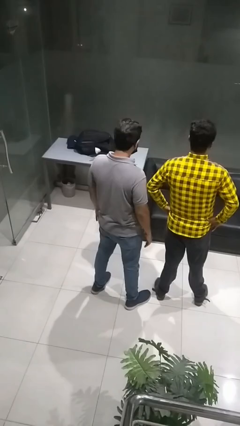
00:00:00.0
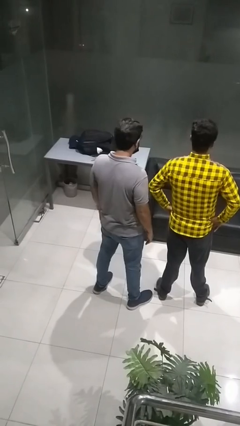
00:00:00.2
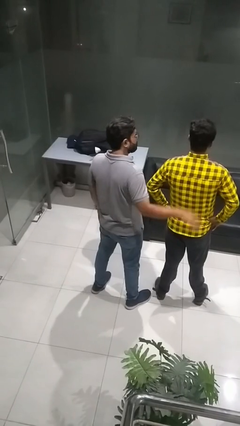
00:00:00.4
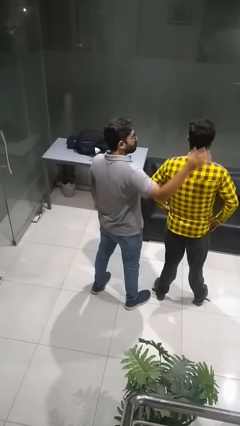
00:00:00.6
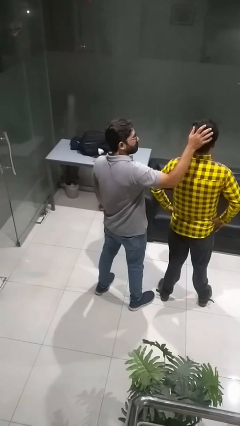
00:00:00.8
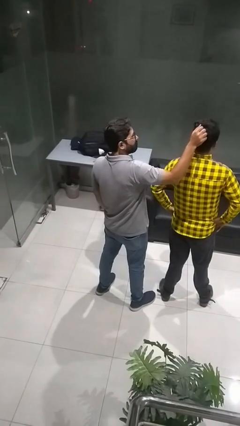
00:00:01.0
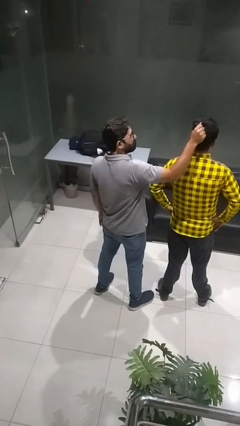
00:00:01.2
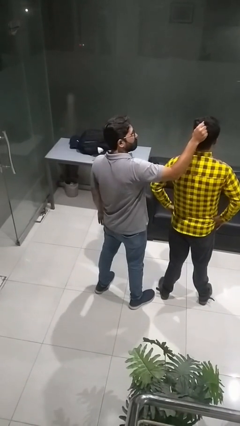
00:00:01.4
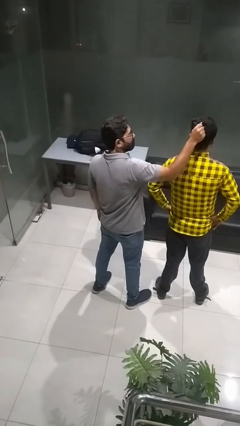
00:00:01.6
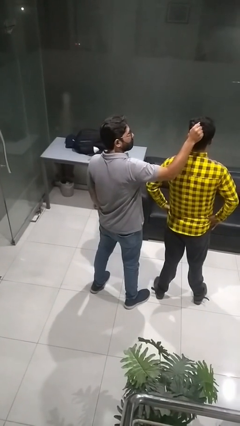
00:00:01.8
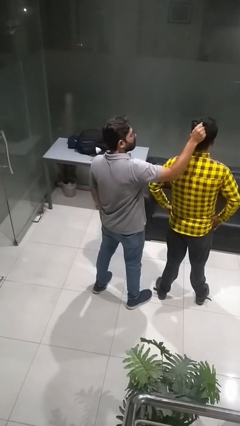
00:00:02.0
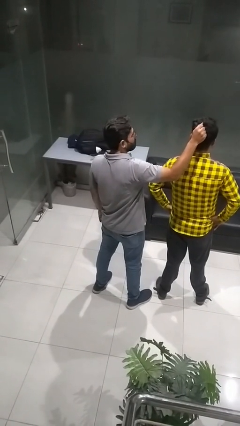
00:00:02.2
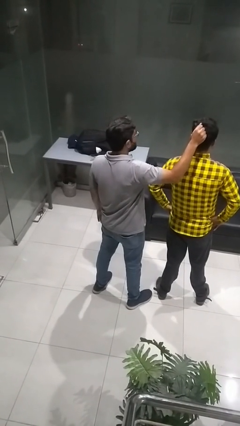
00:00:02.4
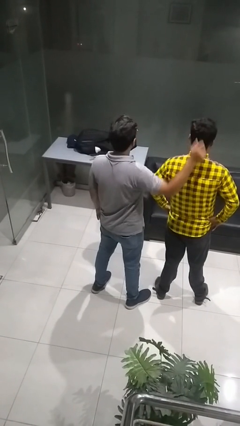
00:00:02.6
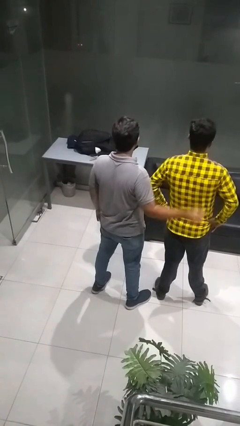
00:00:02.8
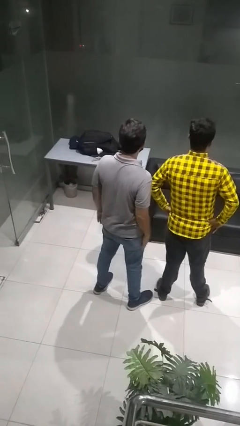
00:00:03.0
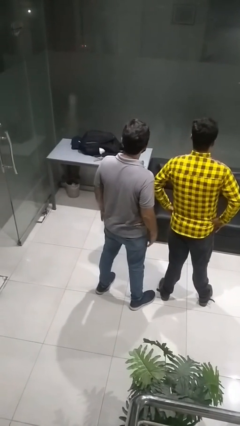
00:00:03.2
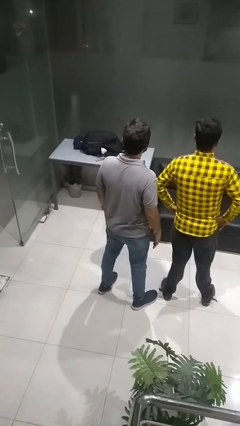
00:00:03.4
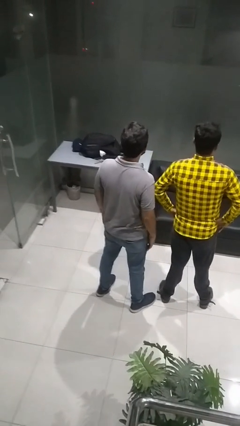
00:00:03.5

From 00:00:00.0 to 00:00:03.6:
person grabs person by hair

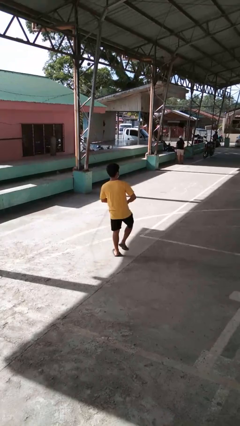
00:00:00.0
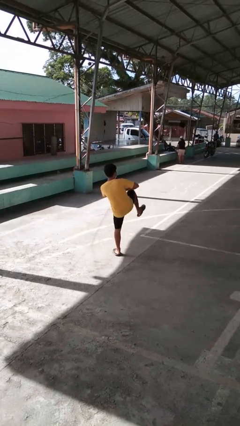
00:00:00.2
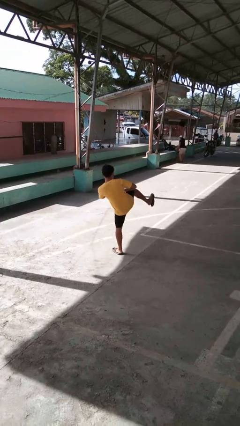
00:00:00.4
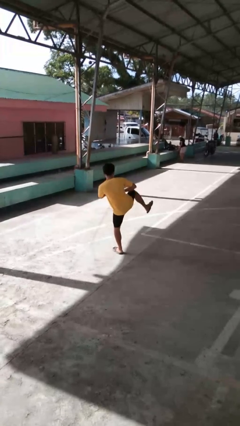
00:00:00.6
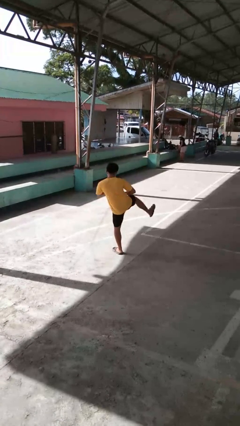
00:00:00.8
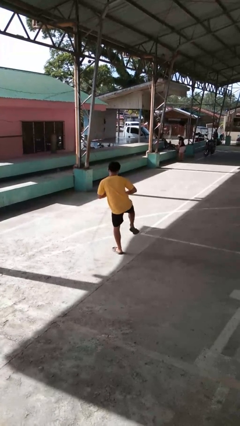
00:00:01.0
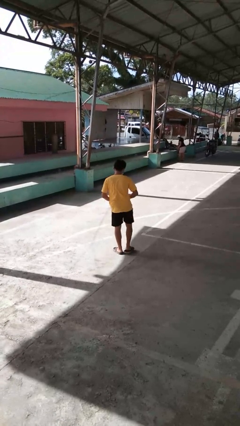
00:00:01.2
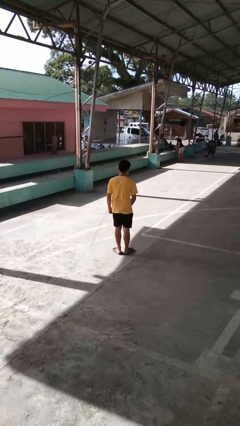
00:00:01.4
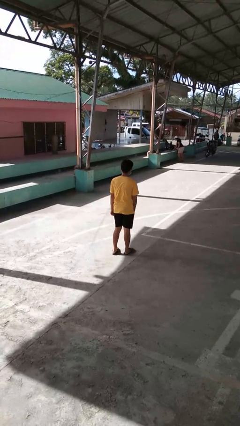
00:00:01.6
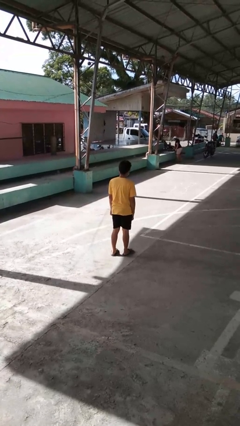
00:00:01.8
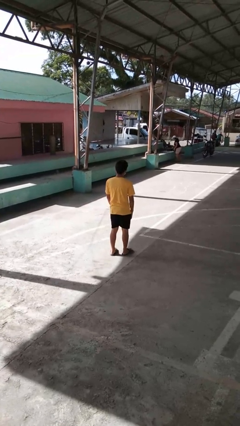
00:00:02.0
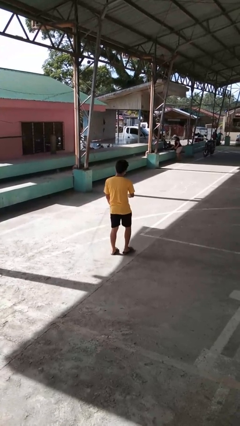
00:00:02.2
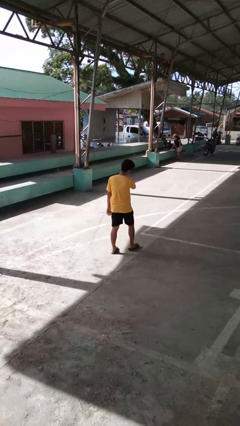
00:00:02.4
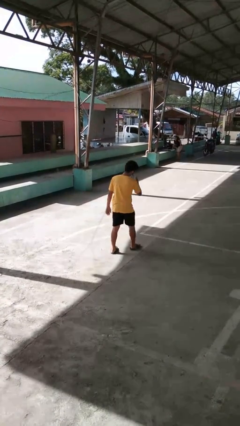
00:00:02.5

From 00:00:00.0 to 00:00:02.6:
person karate kicks

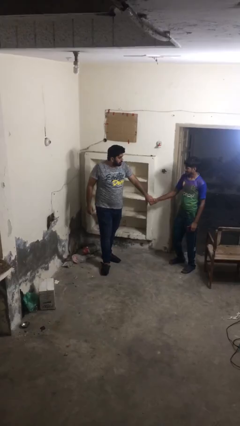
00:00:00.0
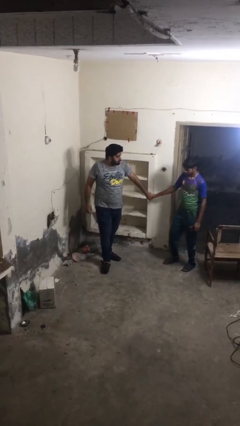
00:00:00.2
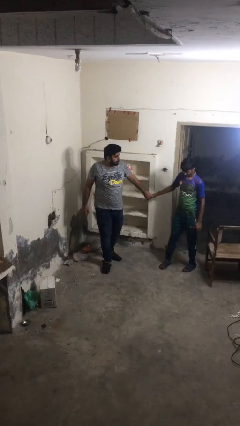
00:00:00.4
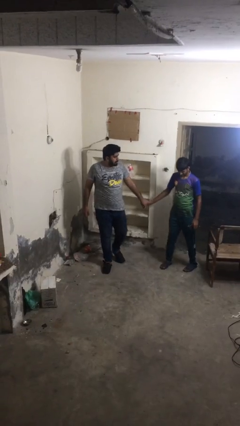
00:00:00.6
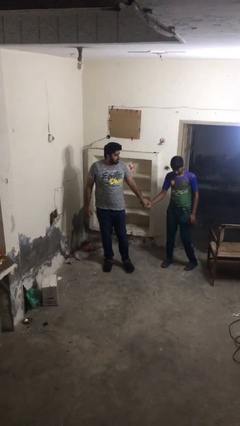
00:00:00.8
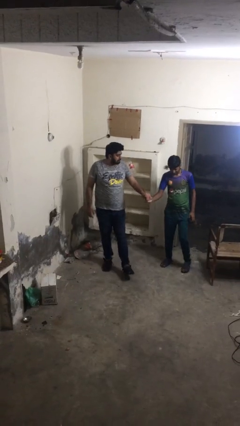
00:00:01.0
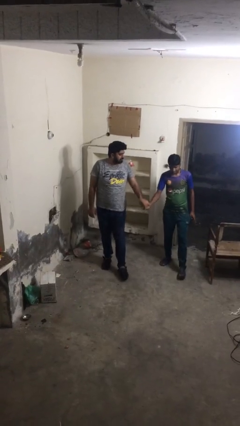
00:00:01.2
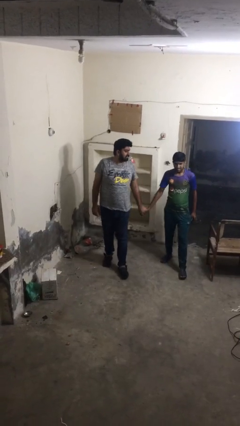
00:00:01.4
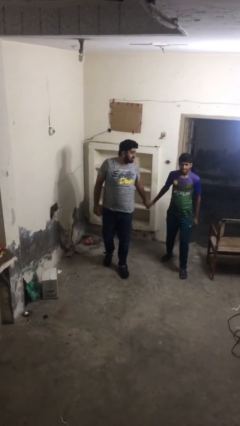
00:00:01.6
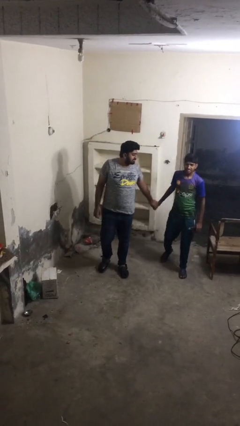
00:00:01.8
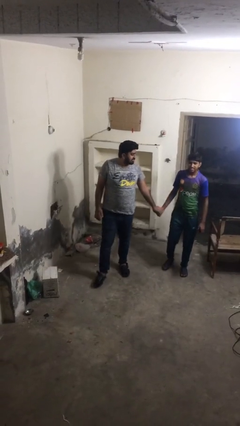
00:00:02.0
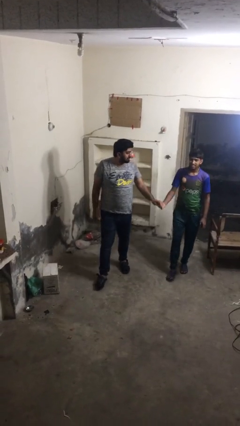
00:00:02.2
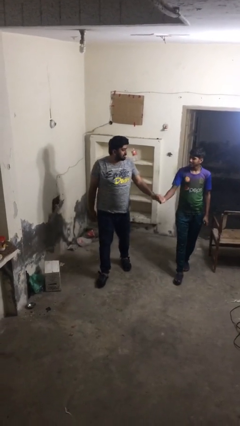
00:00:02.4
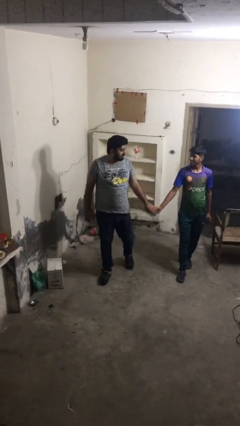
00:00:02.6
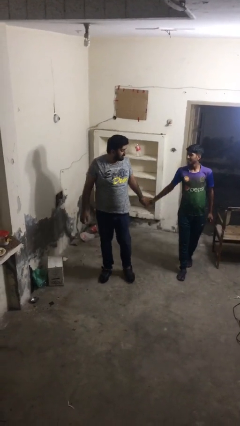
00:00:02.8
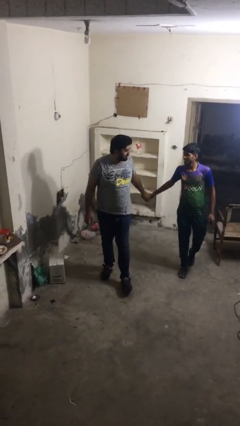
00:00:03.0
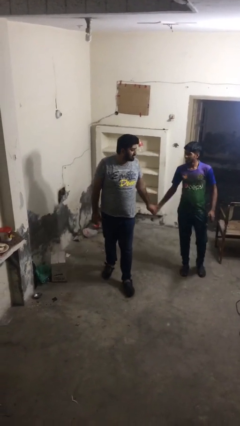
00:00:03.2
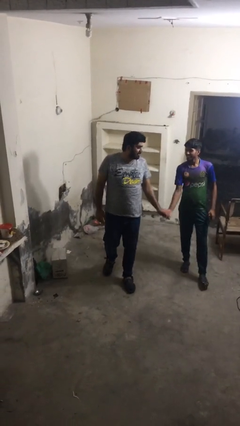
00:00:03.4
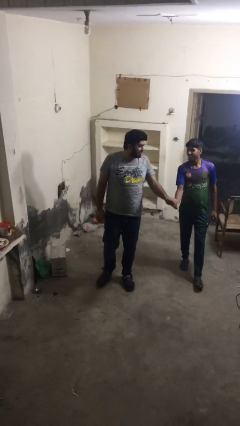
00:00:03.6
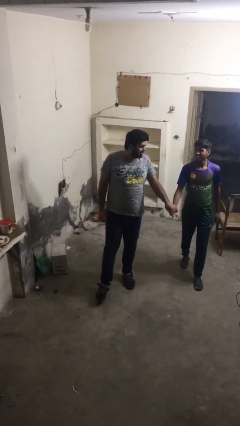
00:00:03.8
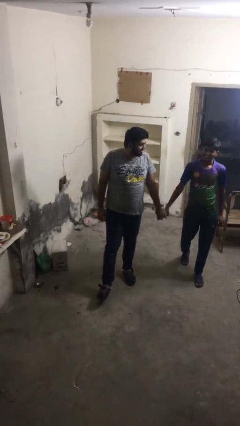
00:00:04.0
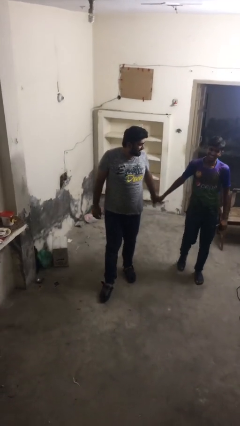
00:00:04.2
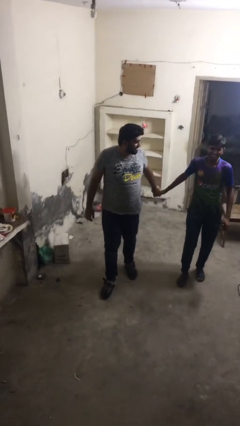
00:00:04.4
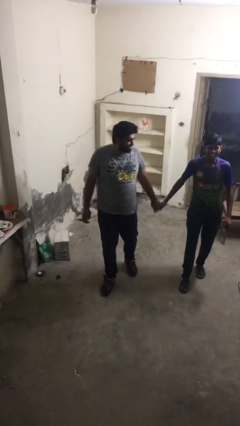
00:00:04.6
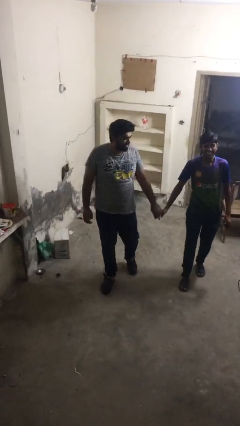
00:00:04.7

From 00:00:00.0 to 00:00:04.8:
person holds hand

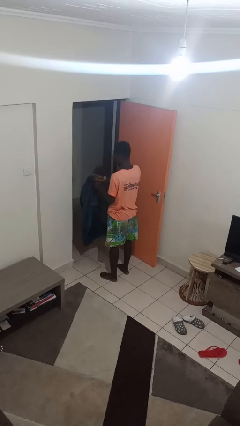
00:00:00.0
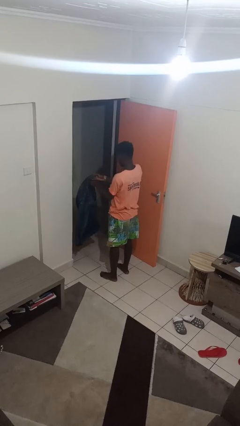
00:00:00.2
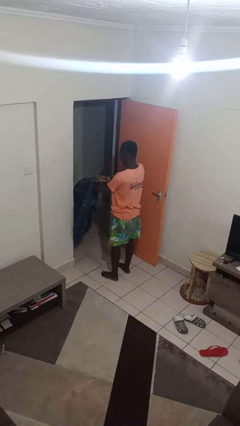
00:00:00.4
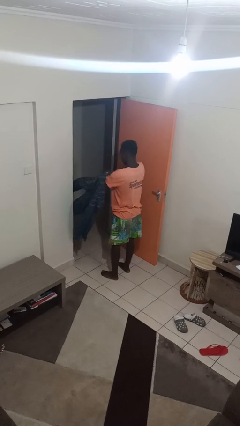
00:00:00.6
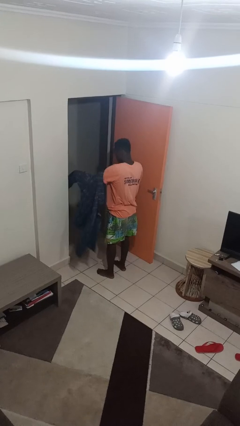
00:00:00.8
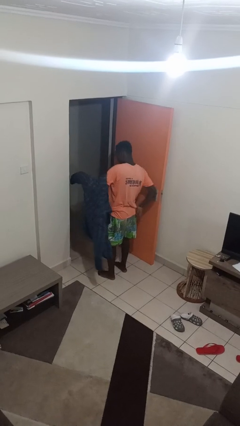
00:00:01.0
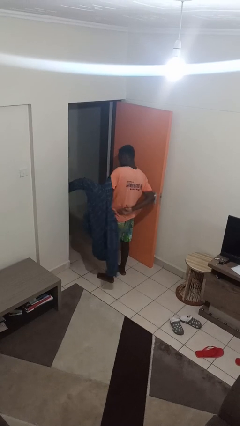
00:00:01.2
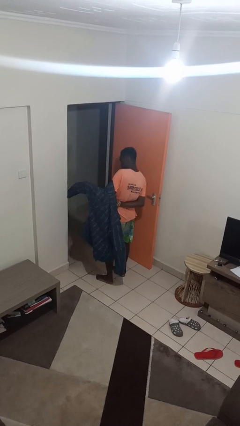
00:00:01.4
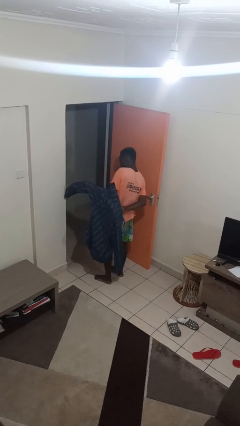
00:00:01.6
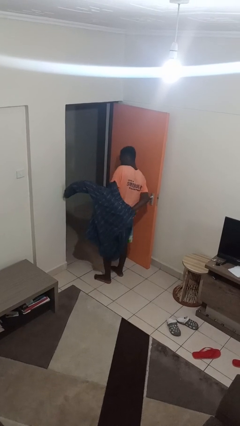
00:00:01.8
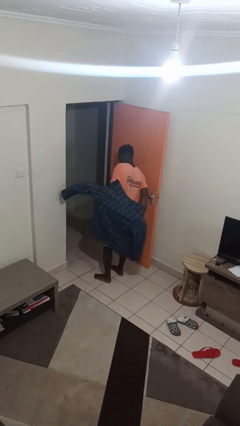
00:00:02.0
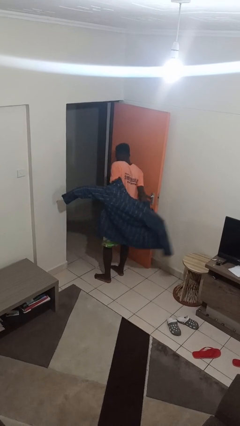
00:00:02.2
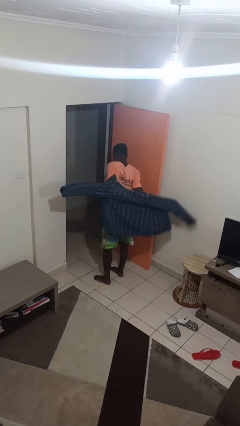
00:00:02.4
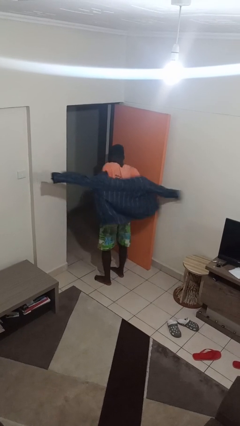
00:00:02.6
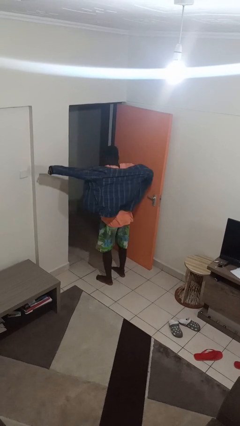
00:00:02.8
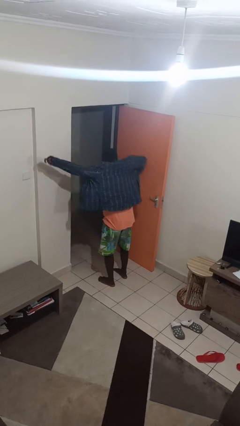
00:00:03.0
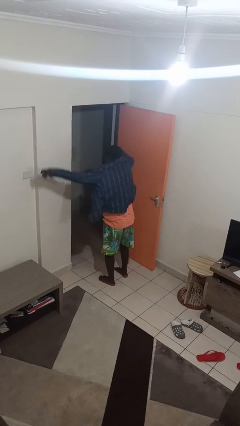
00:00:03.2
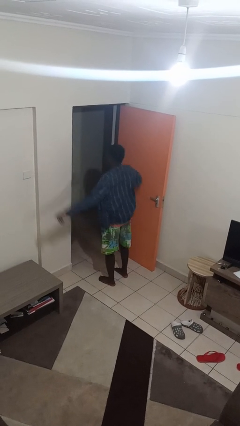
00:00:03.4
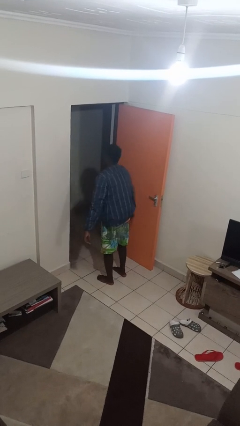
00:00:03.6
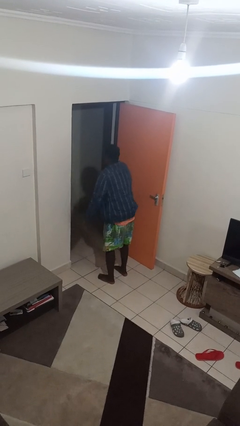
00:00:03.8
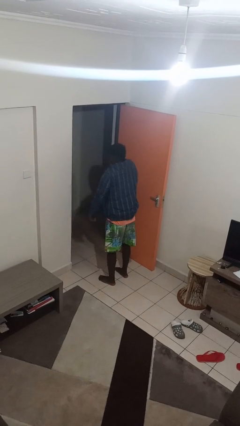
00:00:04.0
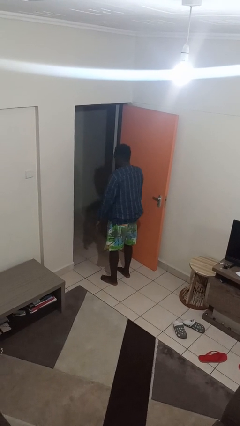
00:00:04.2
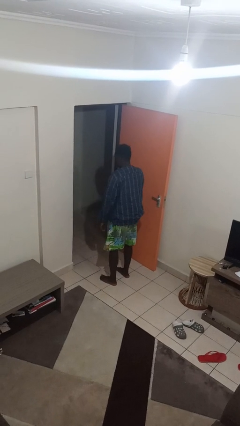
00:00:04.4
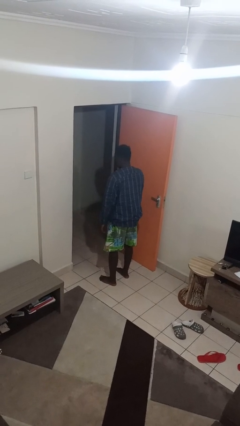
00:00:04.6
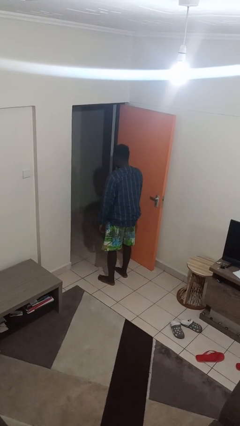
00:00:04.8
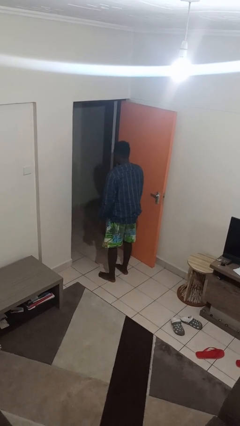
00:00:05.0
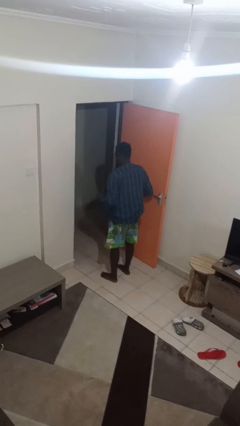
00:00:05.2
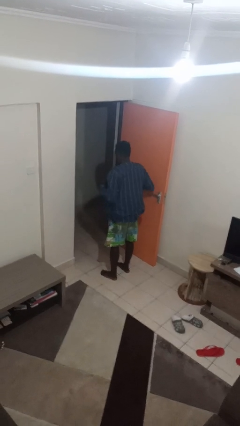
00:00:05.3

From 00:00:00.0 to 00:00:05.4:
person puts on jacket

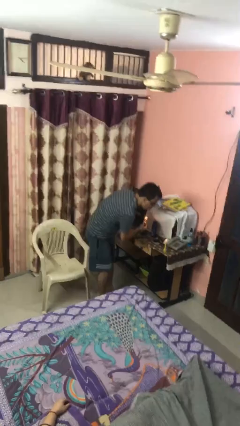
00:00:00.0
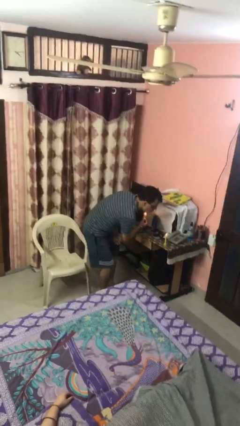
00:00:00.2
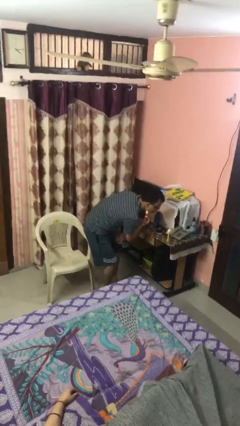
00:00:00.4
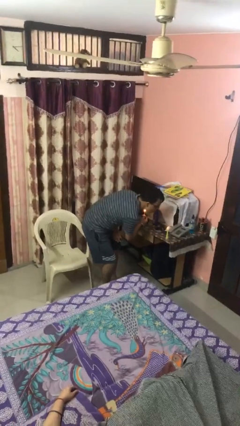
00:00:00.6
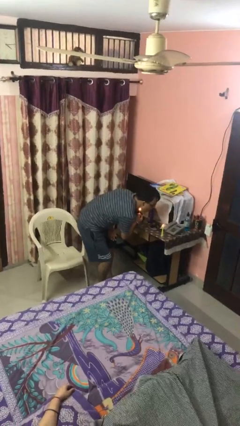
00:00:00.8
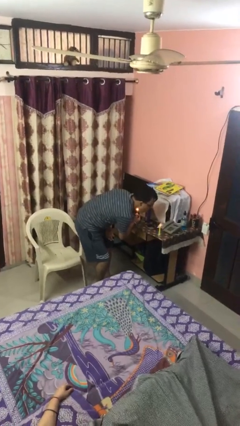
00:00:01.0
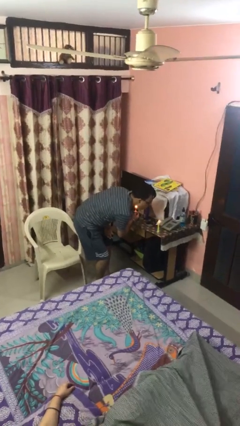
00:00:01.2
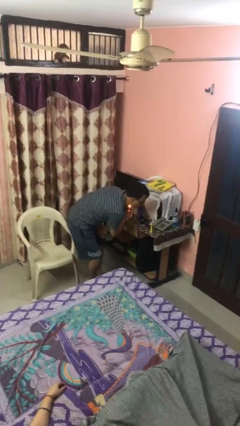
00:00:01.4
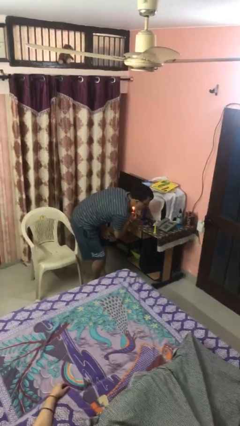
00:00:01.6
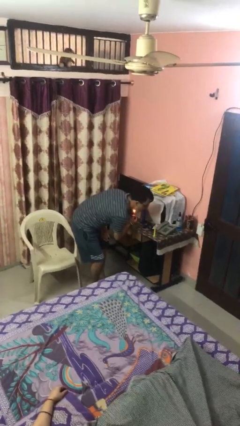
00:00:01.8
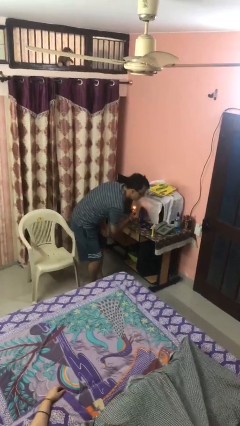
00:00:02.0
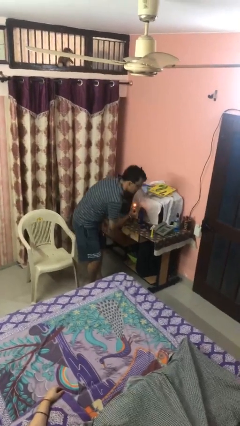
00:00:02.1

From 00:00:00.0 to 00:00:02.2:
person extinguishes candle
